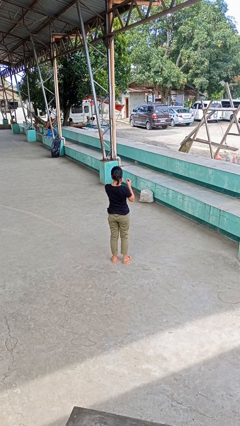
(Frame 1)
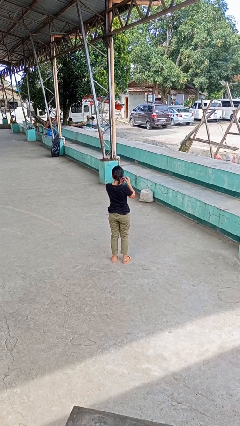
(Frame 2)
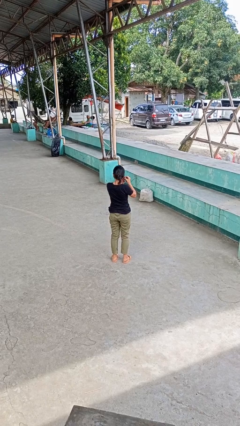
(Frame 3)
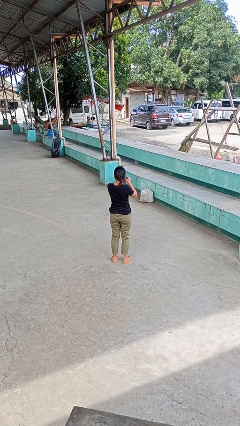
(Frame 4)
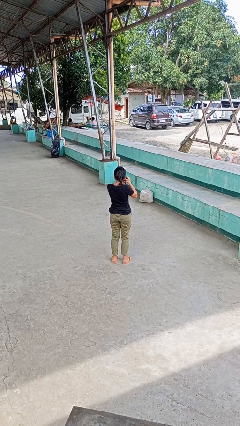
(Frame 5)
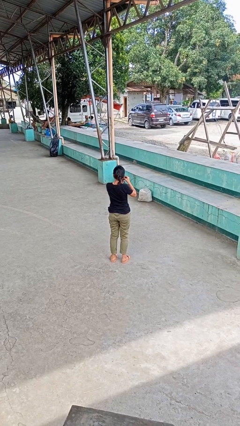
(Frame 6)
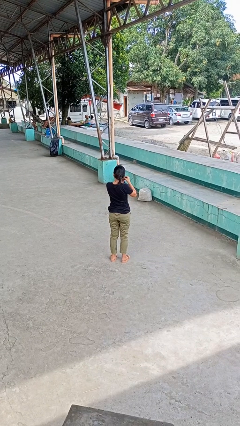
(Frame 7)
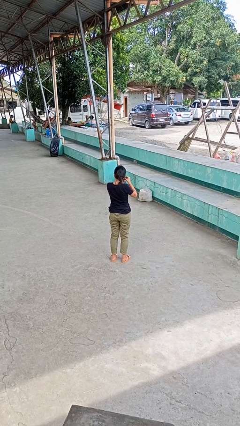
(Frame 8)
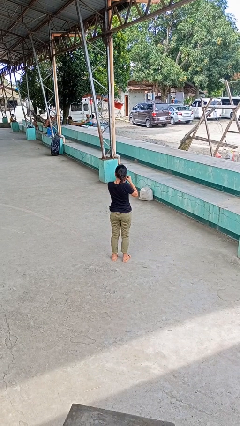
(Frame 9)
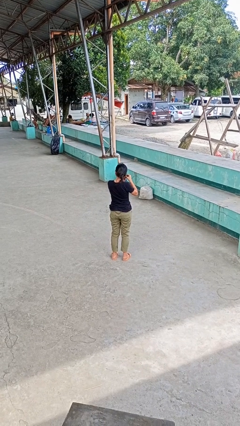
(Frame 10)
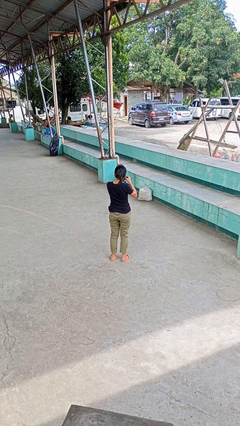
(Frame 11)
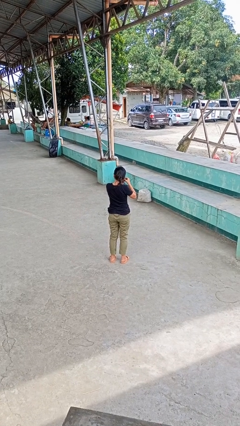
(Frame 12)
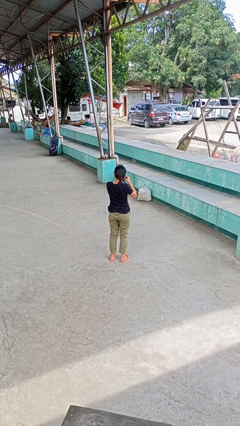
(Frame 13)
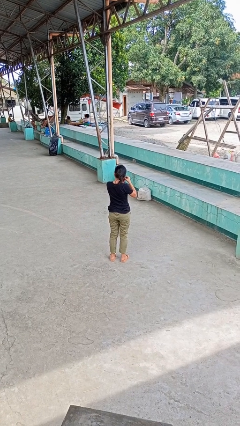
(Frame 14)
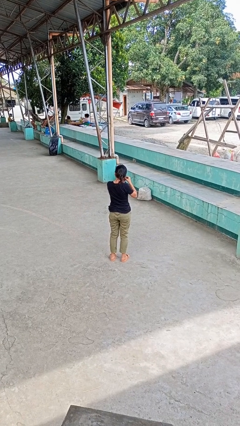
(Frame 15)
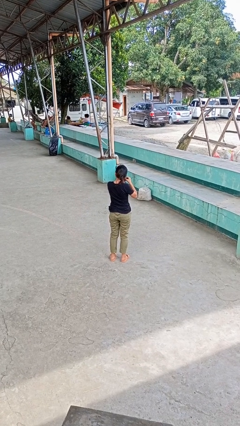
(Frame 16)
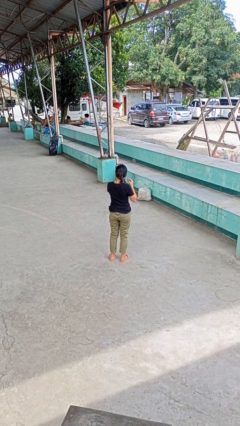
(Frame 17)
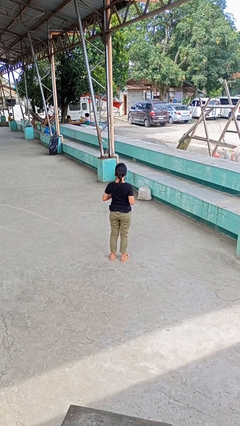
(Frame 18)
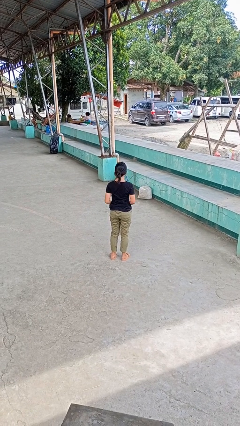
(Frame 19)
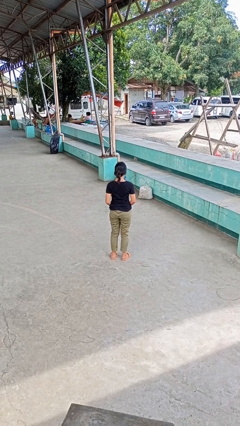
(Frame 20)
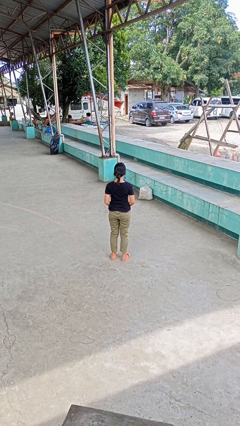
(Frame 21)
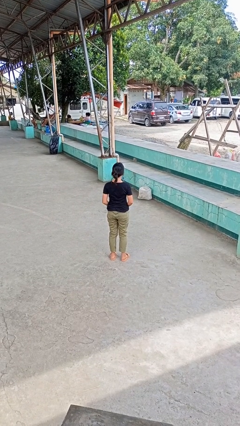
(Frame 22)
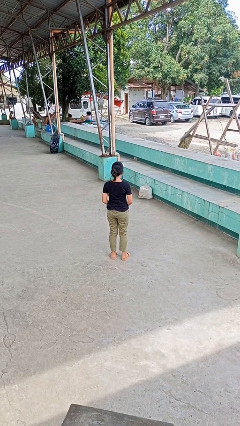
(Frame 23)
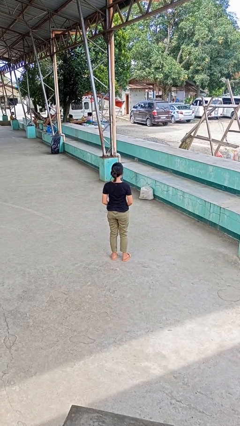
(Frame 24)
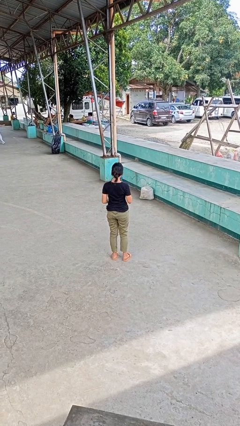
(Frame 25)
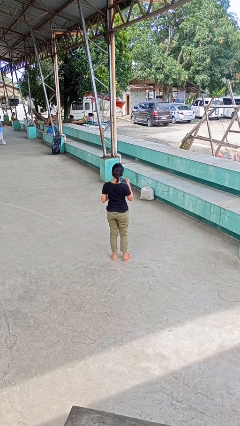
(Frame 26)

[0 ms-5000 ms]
person puts on earrings

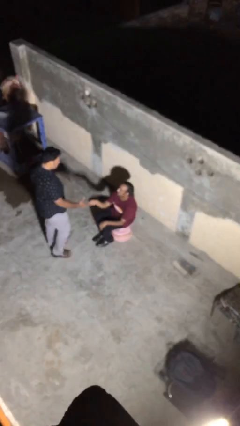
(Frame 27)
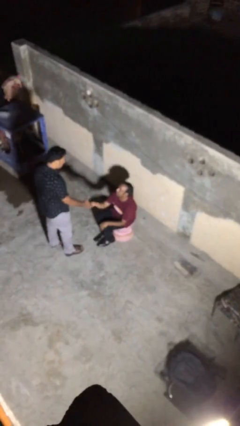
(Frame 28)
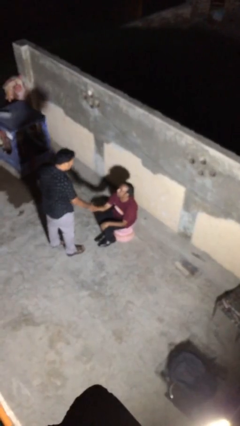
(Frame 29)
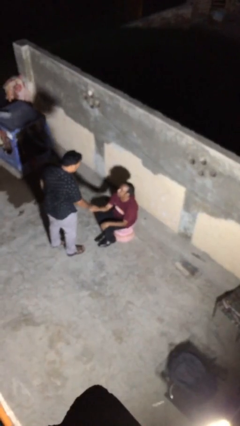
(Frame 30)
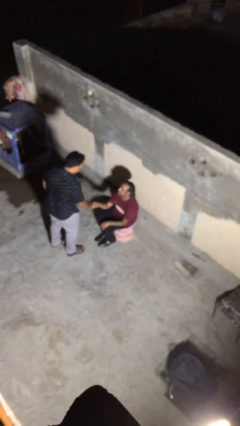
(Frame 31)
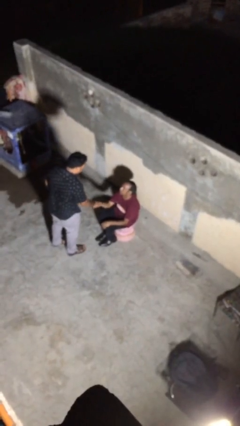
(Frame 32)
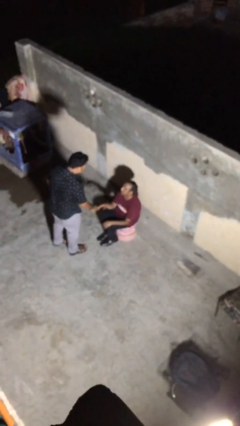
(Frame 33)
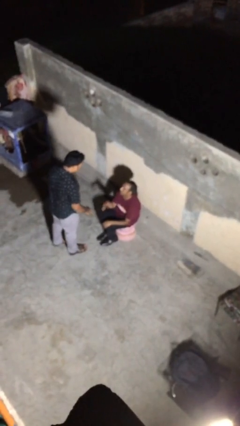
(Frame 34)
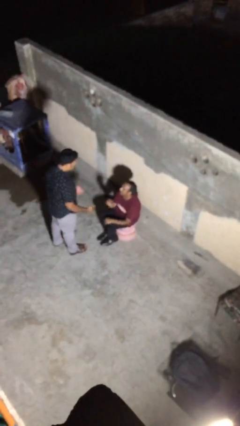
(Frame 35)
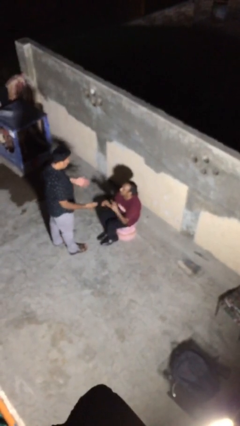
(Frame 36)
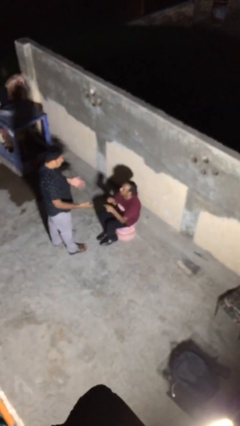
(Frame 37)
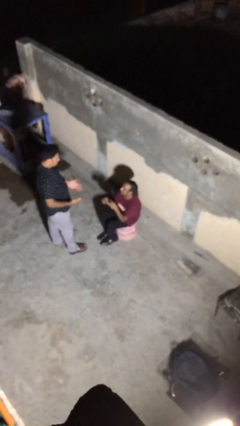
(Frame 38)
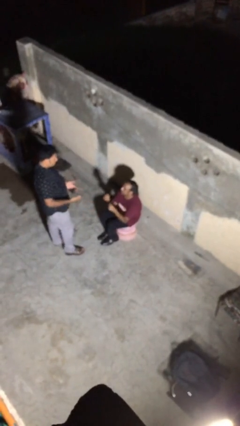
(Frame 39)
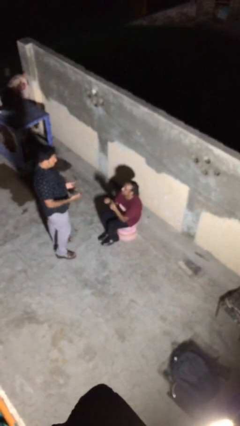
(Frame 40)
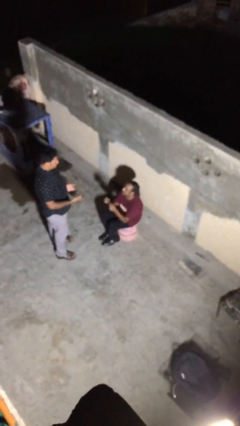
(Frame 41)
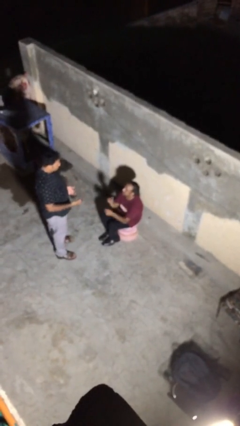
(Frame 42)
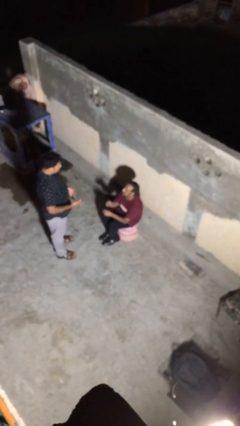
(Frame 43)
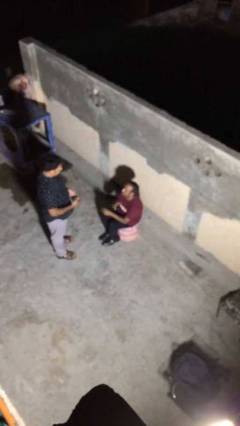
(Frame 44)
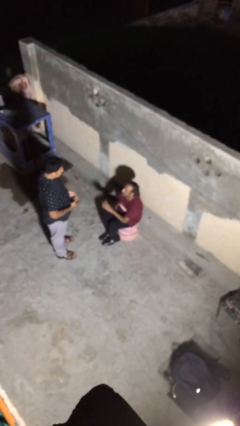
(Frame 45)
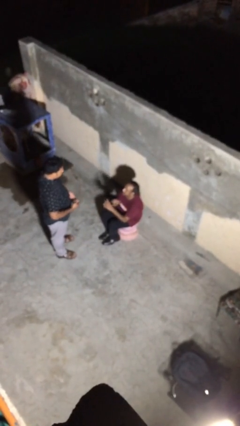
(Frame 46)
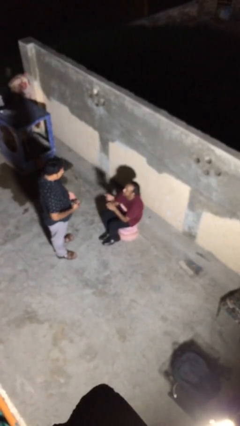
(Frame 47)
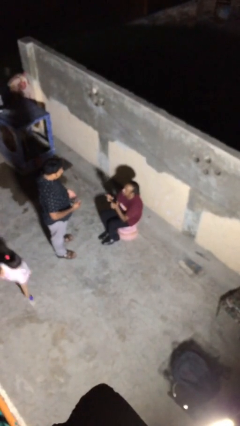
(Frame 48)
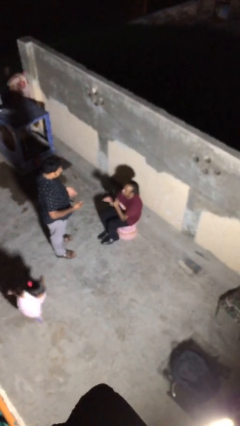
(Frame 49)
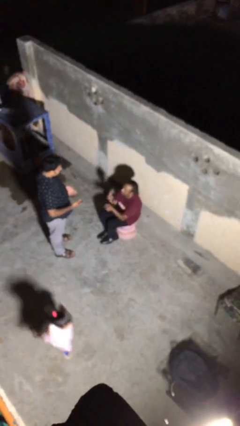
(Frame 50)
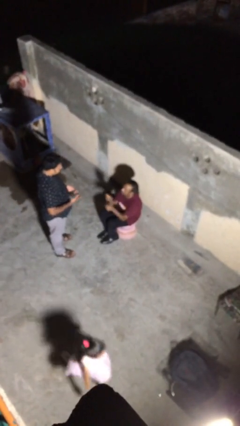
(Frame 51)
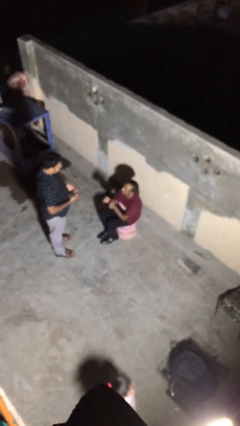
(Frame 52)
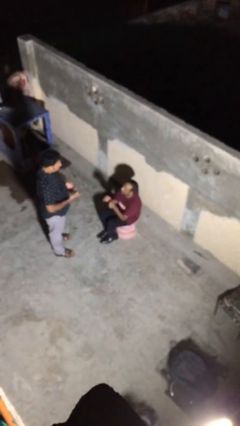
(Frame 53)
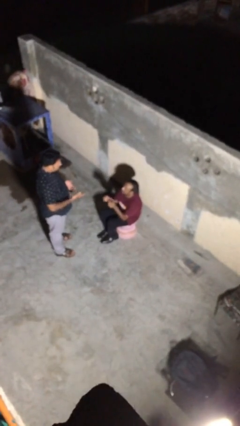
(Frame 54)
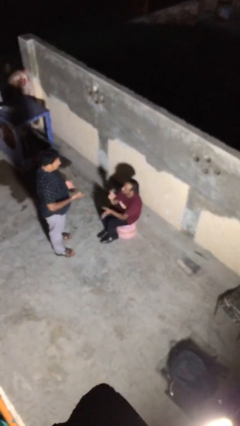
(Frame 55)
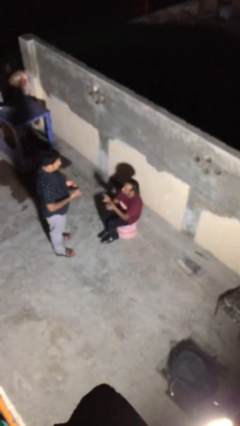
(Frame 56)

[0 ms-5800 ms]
person shakes hand

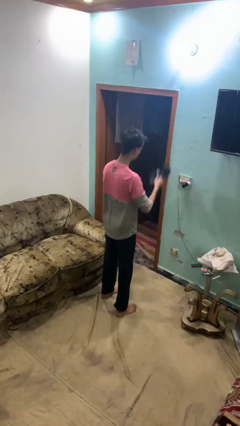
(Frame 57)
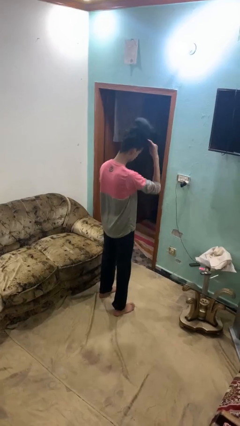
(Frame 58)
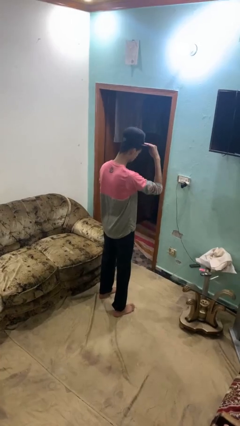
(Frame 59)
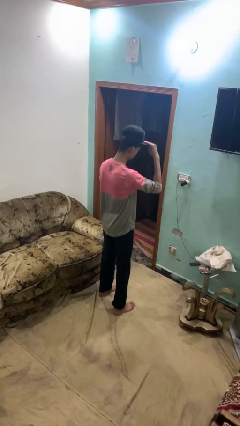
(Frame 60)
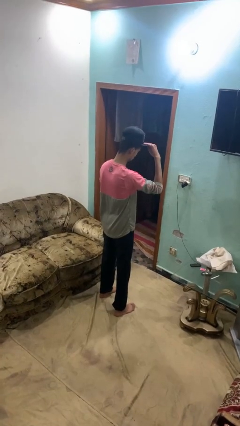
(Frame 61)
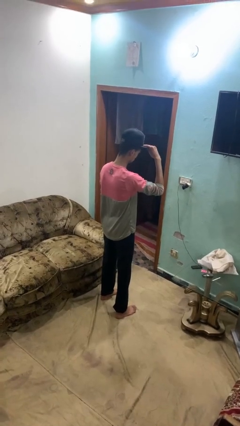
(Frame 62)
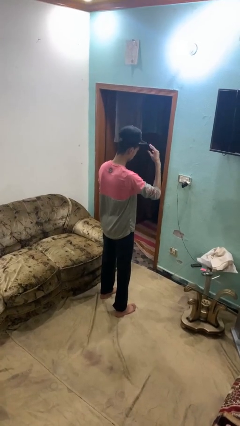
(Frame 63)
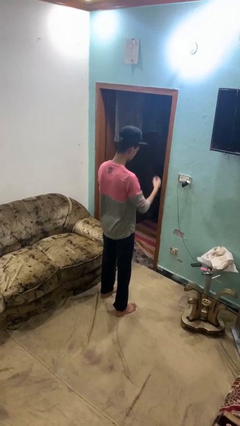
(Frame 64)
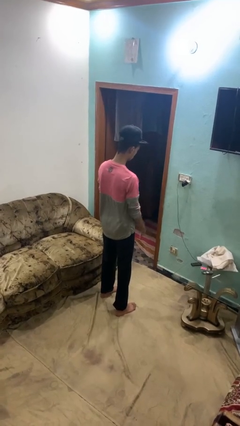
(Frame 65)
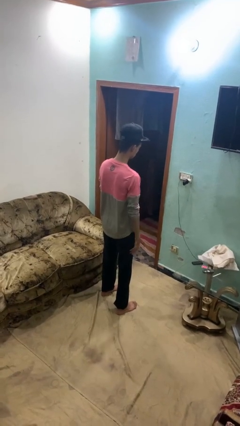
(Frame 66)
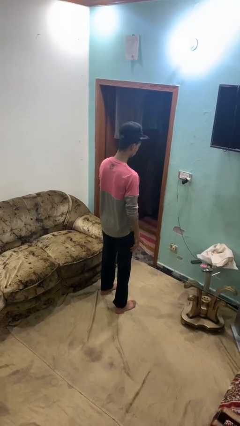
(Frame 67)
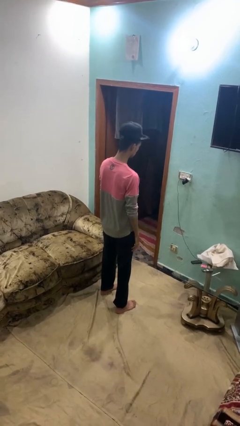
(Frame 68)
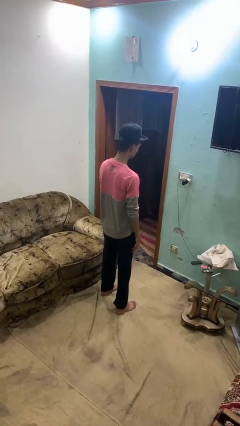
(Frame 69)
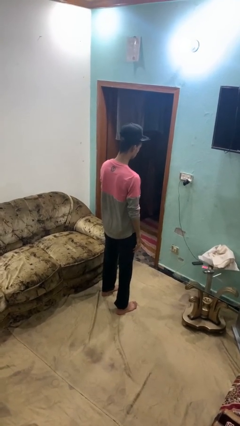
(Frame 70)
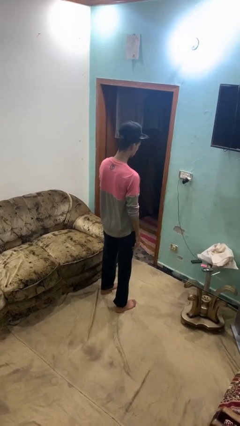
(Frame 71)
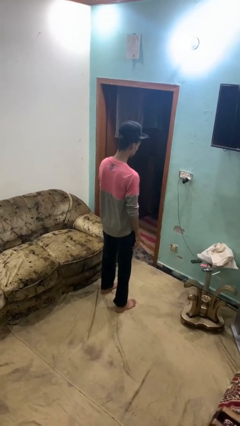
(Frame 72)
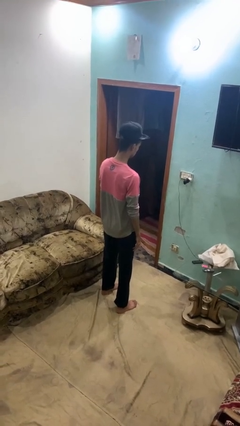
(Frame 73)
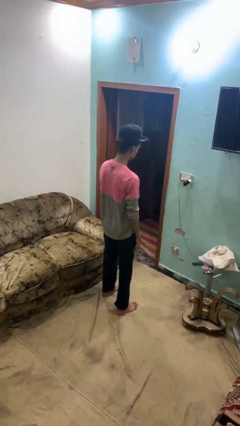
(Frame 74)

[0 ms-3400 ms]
person puts on hat

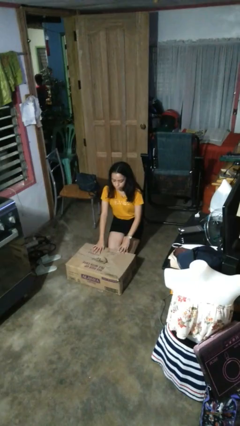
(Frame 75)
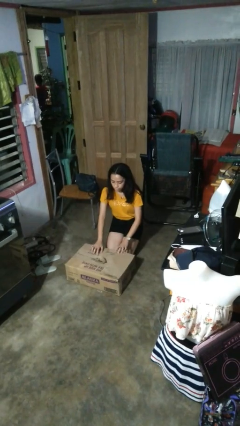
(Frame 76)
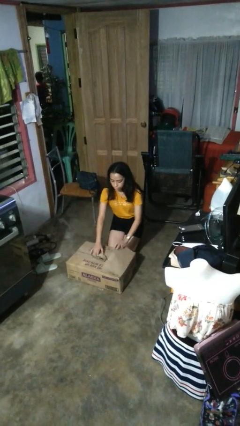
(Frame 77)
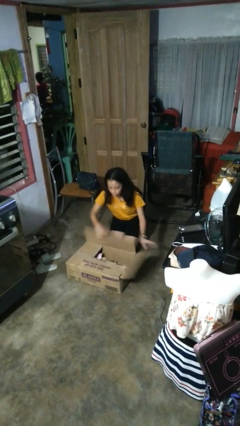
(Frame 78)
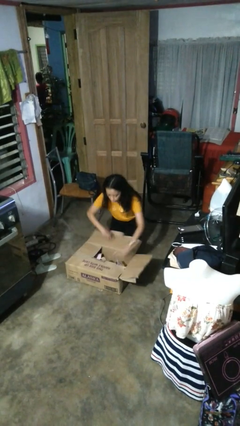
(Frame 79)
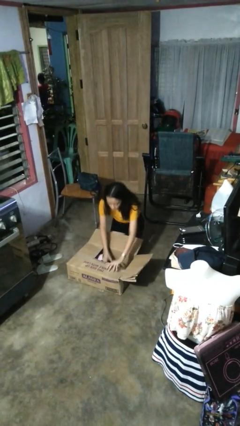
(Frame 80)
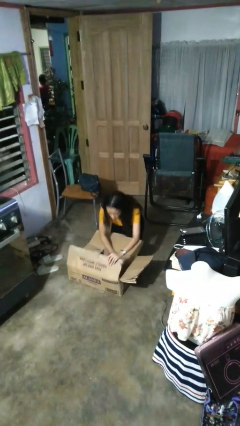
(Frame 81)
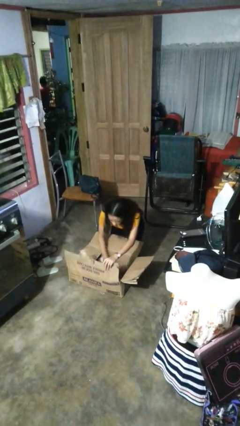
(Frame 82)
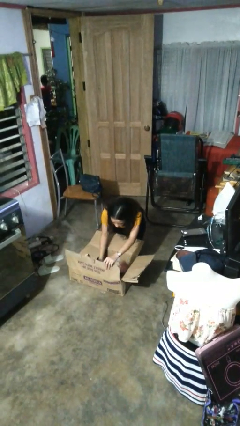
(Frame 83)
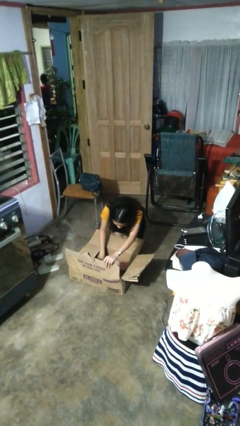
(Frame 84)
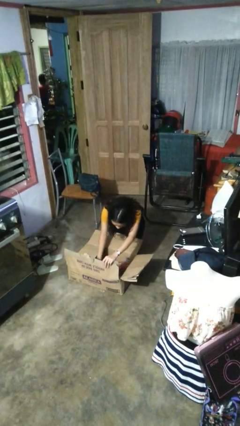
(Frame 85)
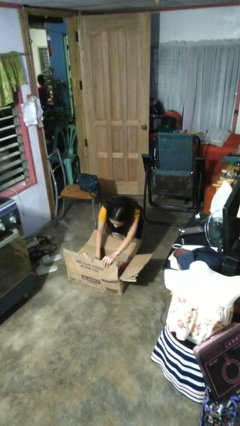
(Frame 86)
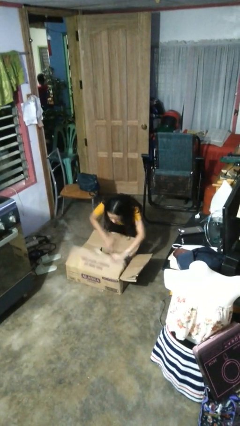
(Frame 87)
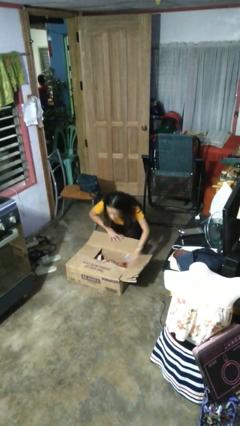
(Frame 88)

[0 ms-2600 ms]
person searches in box

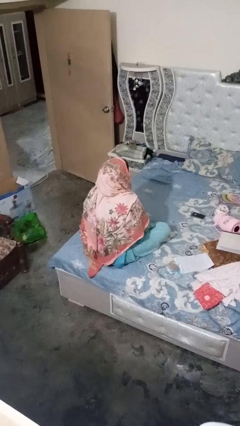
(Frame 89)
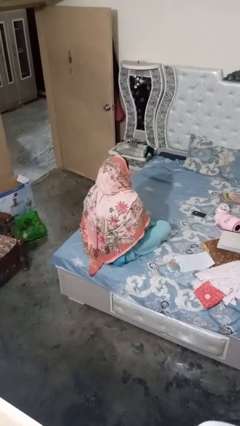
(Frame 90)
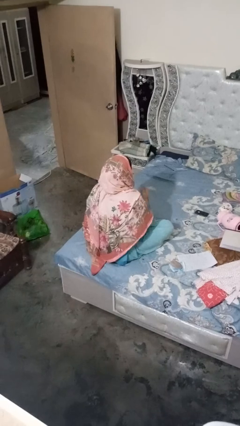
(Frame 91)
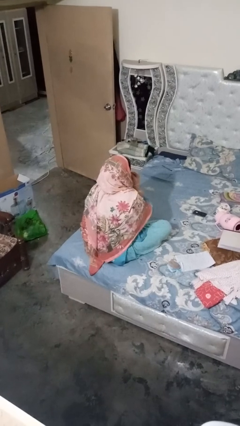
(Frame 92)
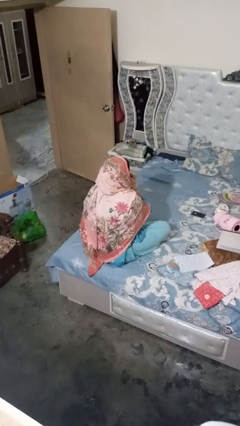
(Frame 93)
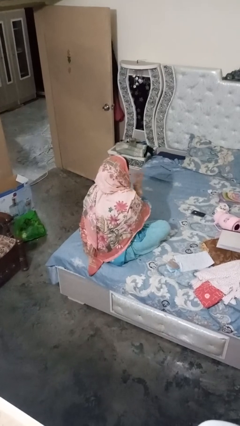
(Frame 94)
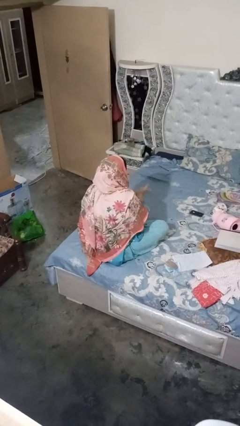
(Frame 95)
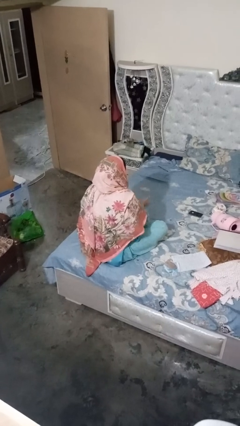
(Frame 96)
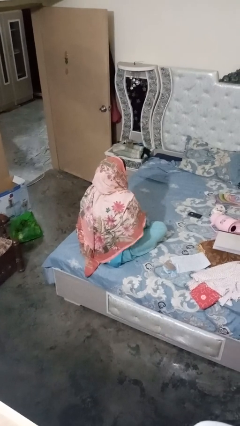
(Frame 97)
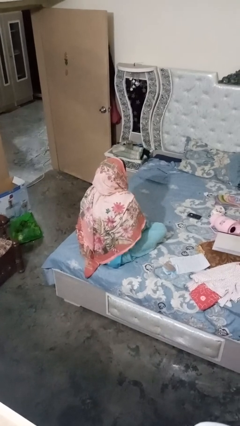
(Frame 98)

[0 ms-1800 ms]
person gestures blow kiss
